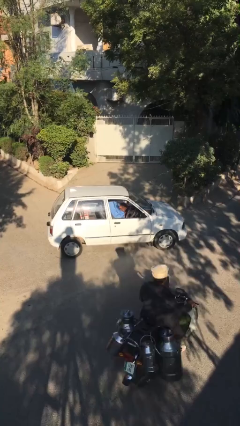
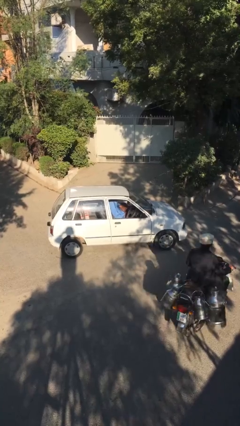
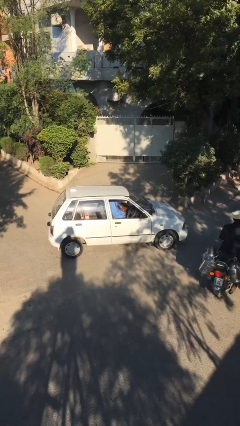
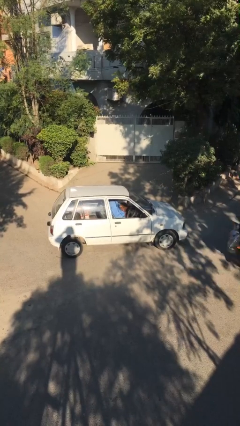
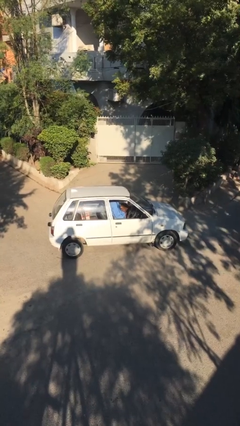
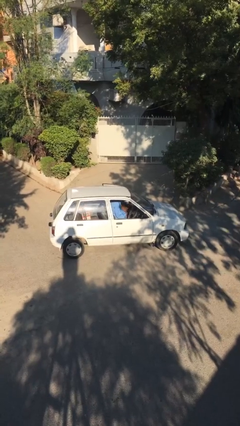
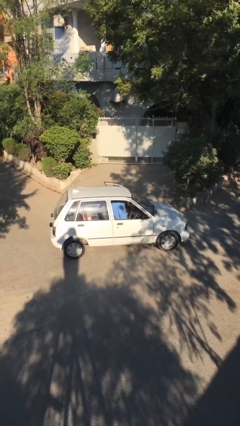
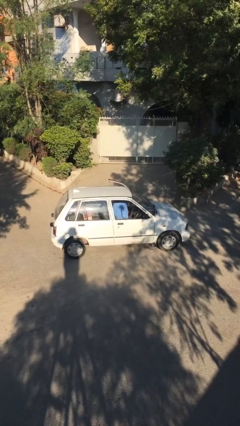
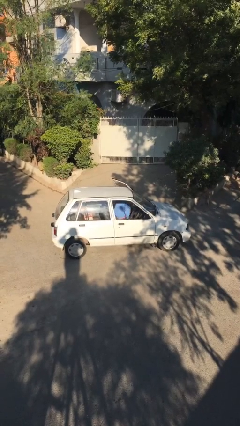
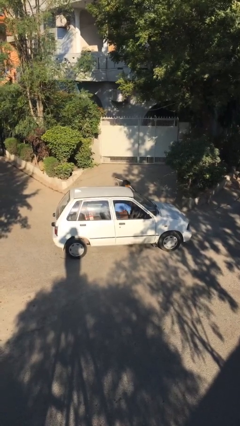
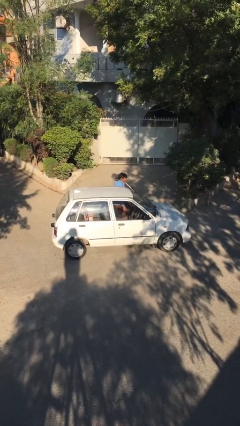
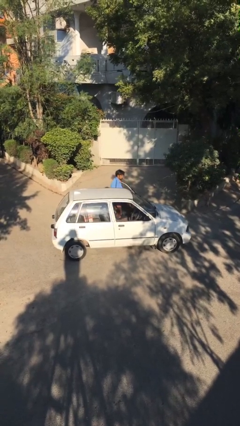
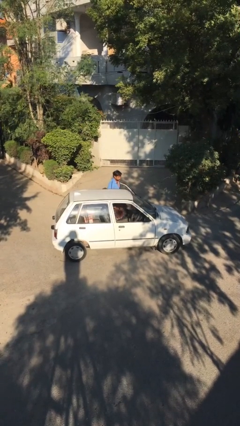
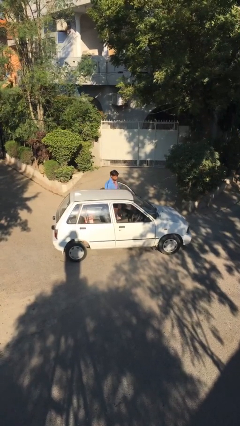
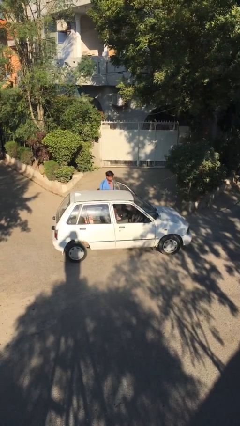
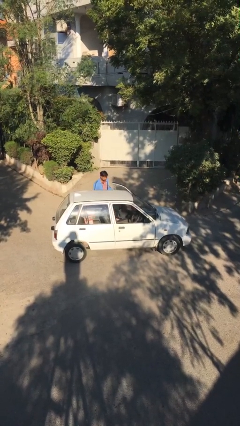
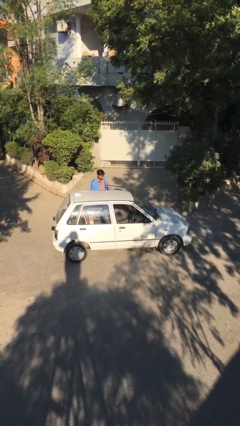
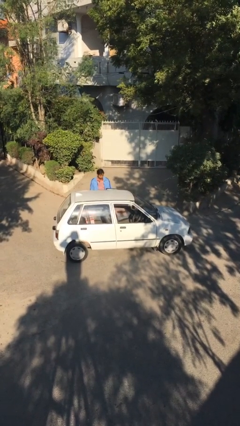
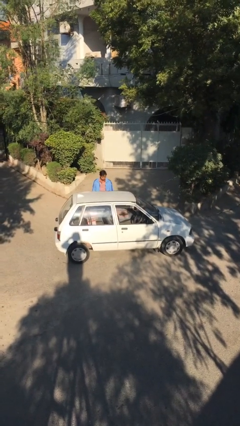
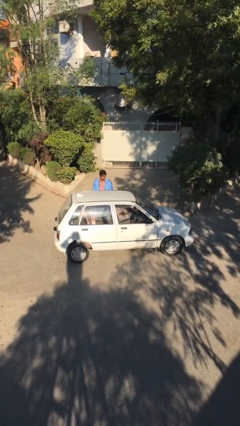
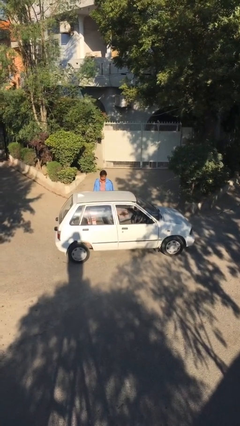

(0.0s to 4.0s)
car drops off person

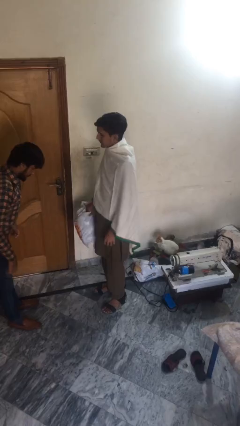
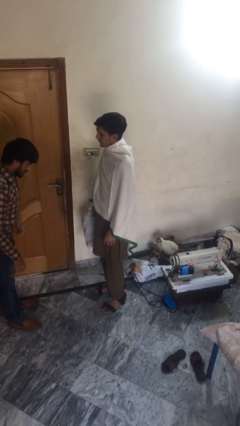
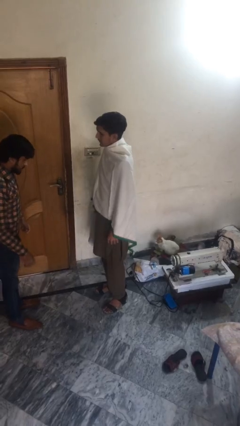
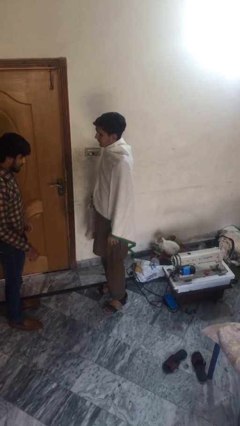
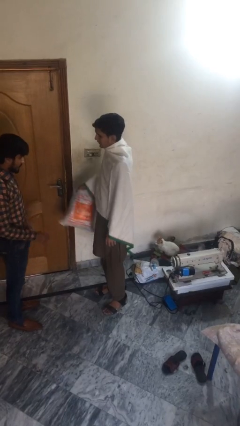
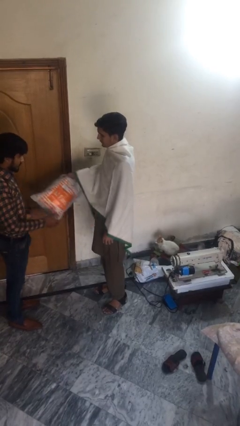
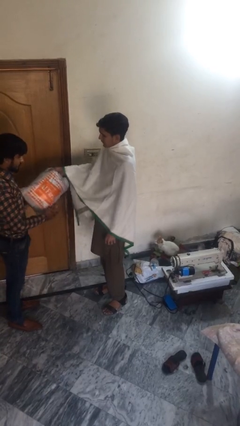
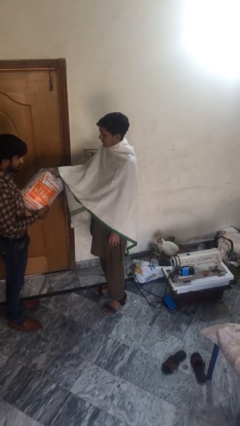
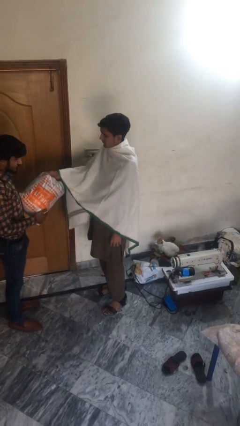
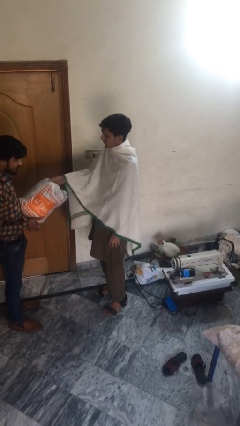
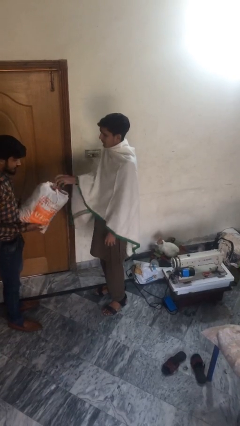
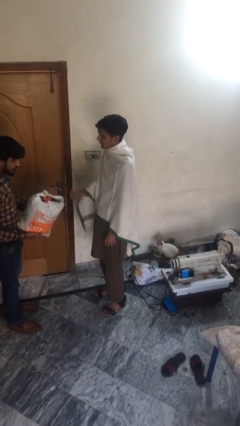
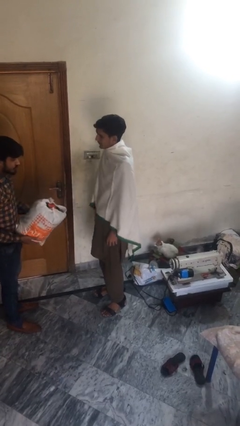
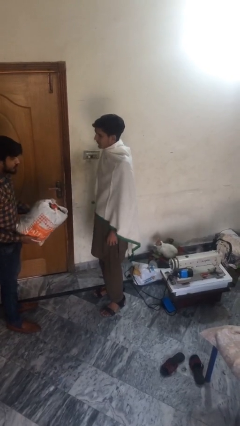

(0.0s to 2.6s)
person transfers object to person

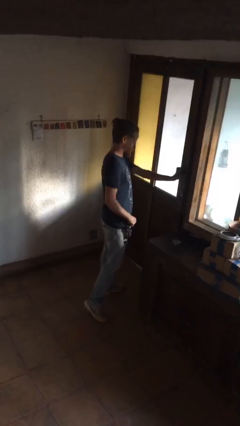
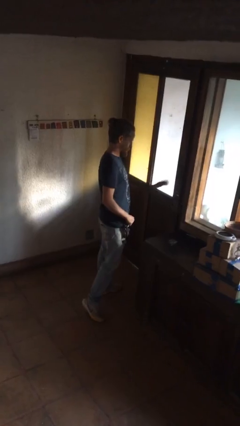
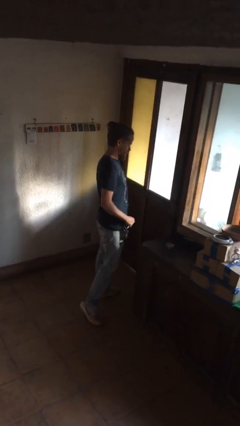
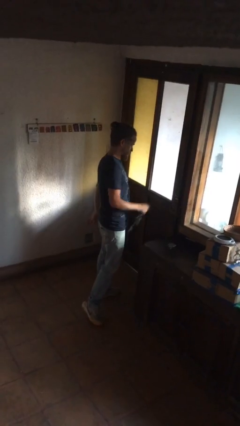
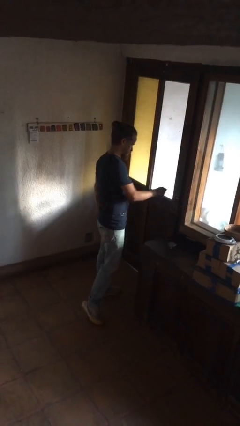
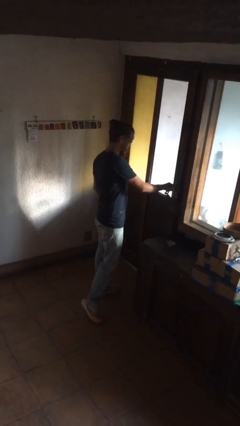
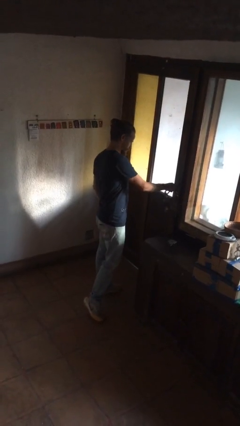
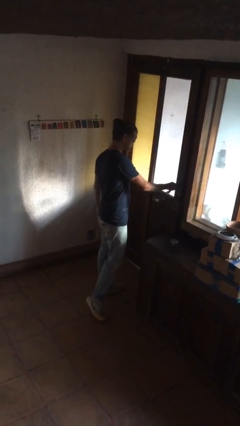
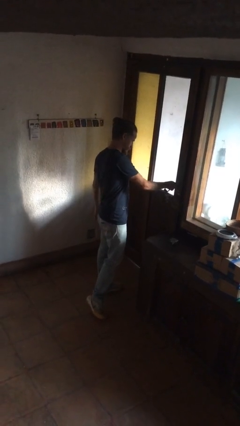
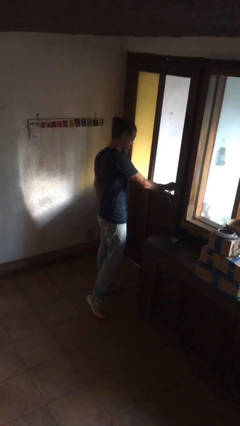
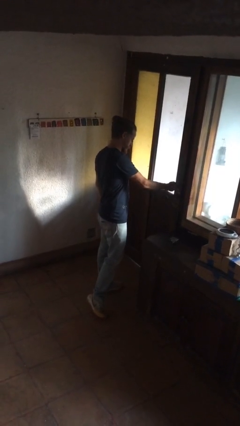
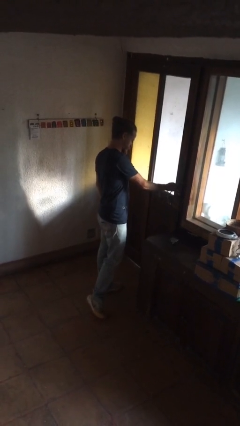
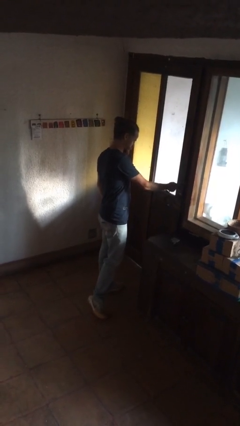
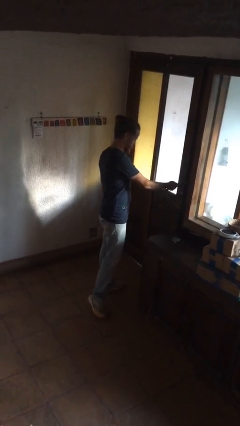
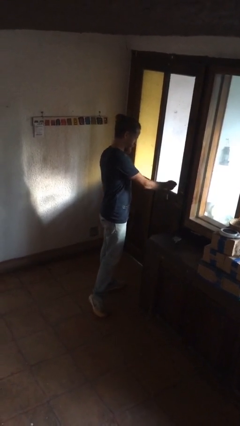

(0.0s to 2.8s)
person locks door with keys

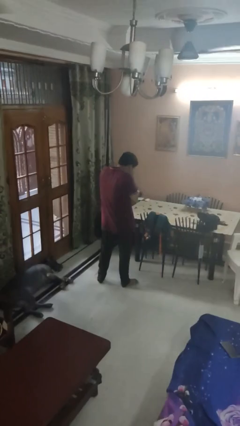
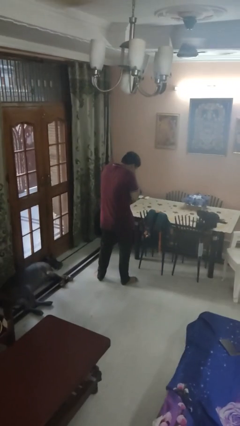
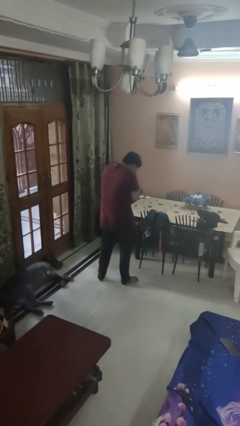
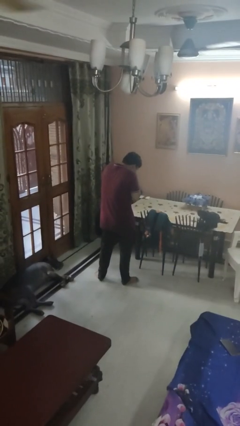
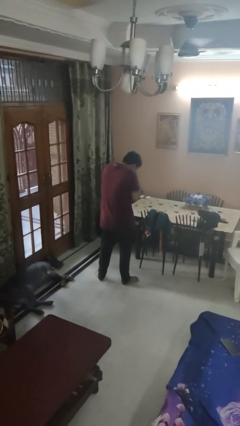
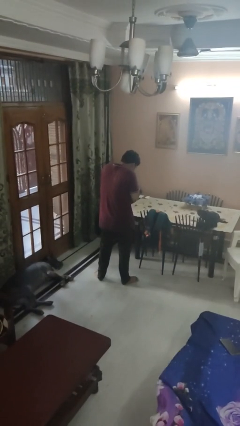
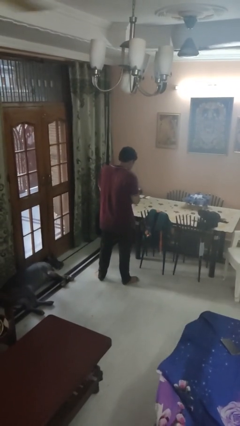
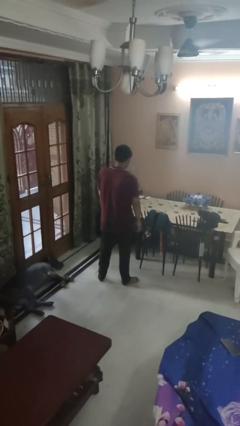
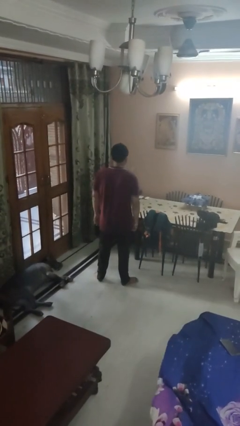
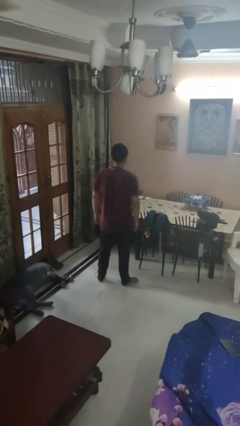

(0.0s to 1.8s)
person sneezes into hand

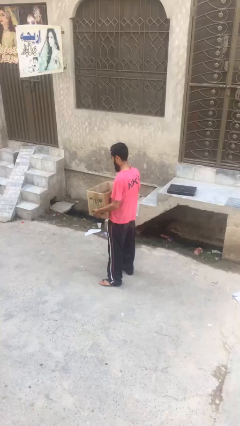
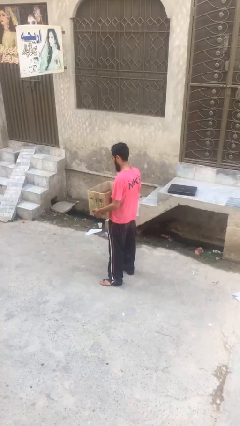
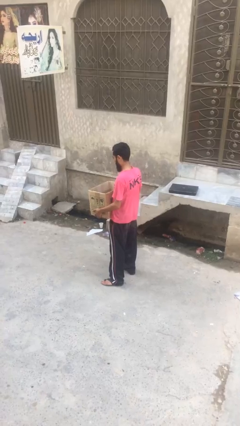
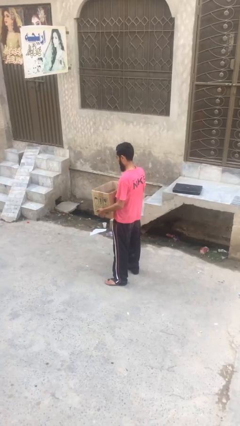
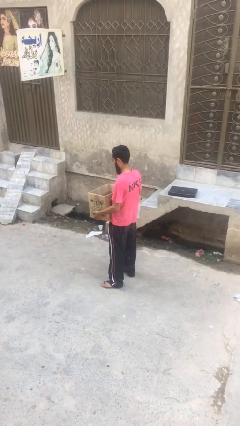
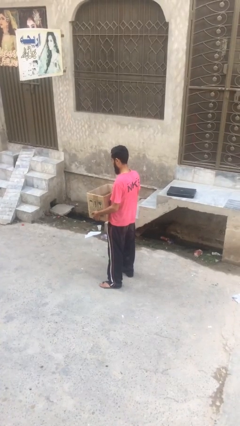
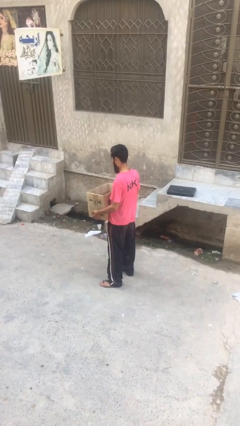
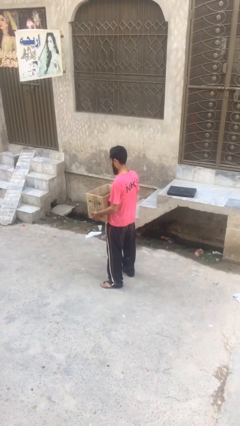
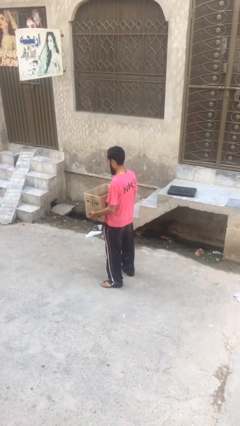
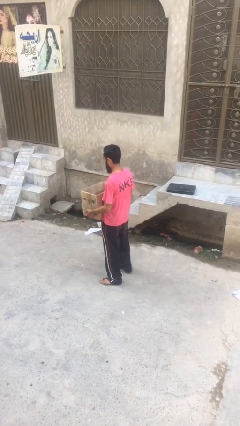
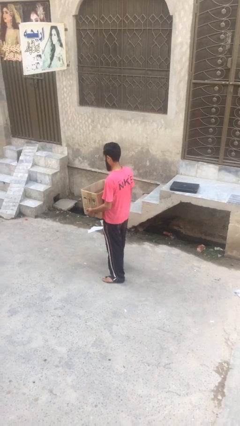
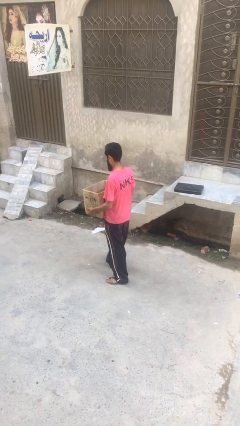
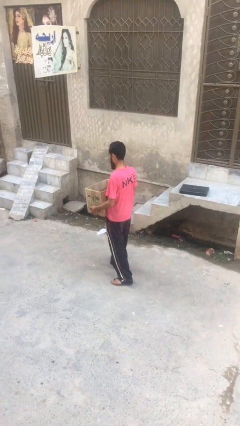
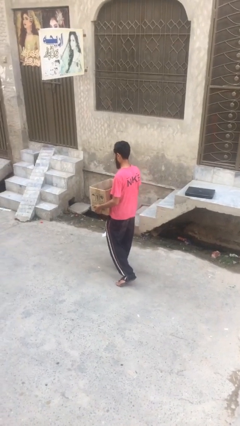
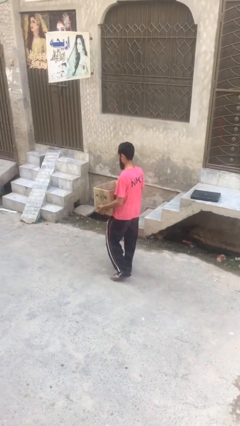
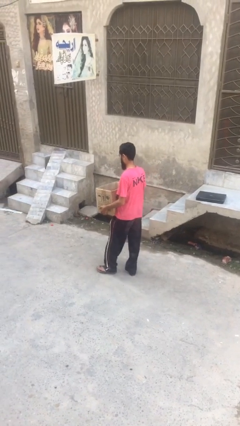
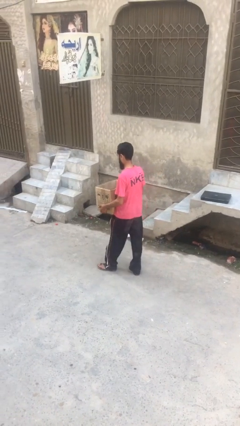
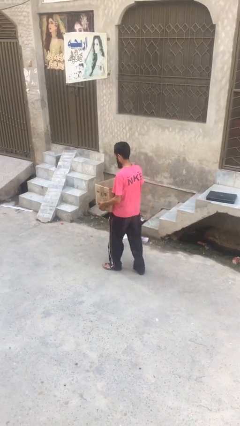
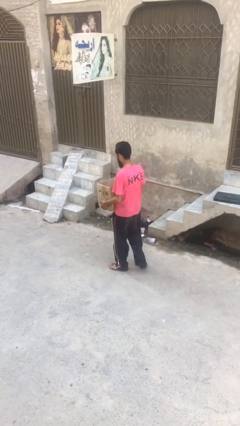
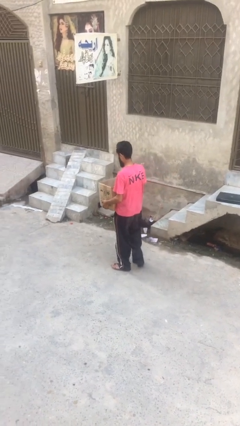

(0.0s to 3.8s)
person carries heavy object

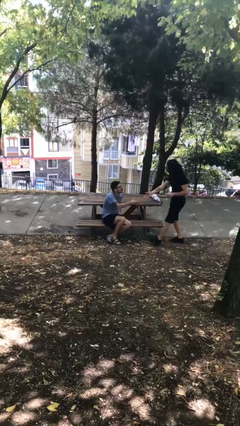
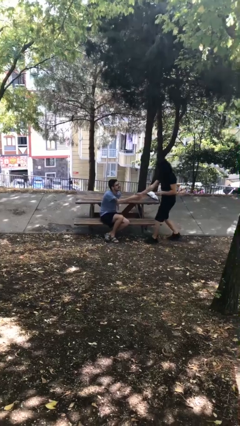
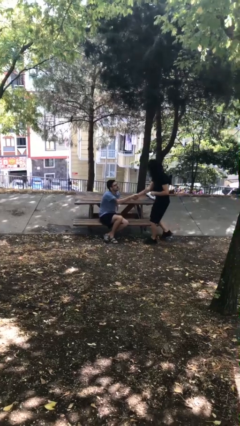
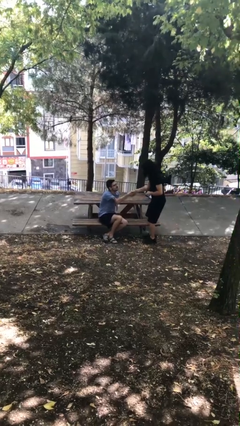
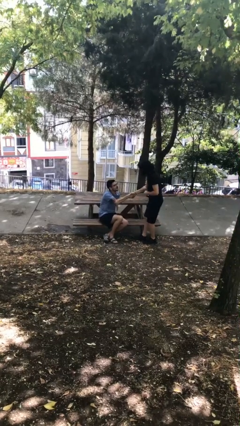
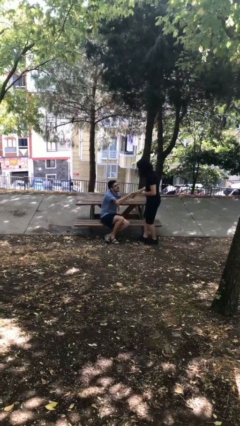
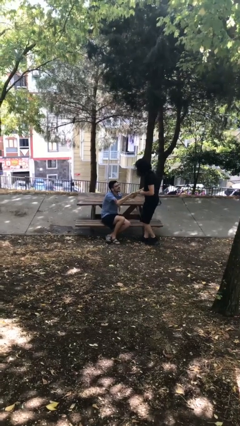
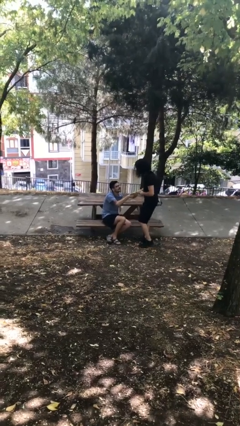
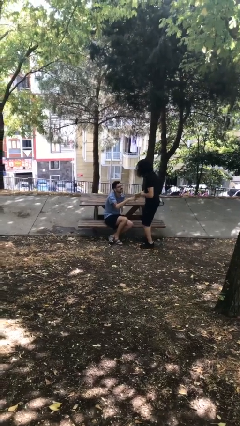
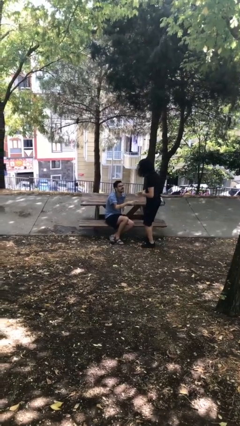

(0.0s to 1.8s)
person shakes hand

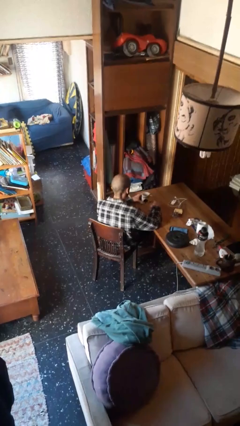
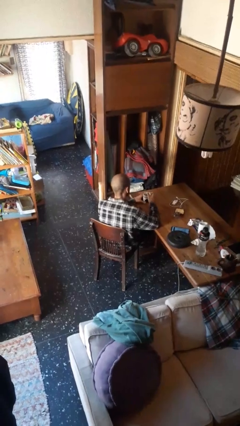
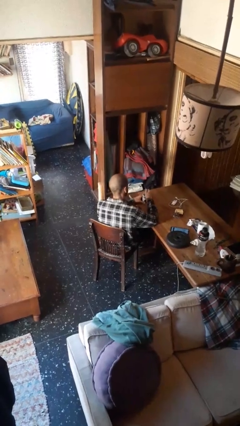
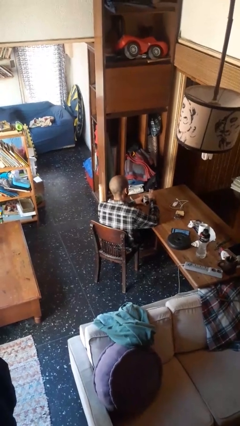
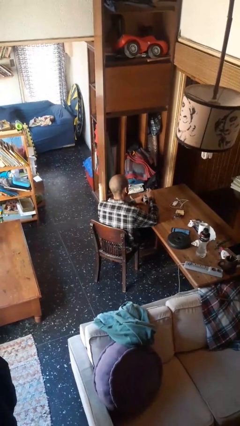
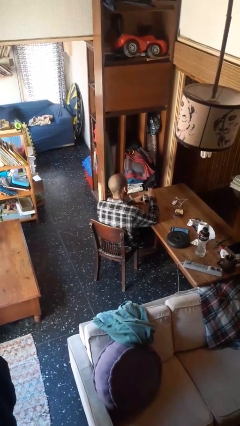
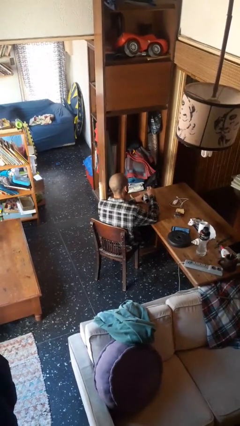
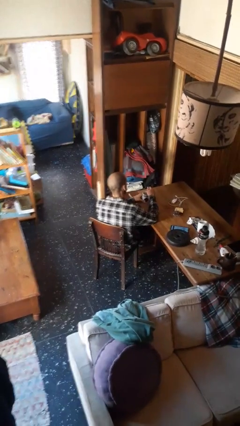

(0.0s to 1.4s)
person stirs mug
